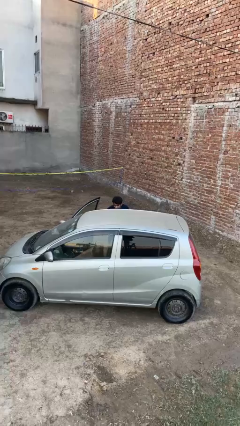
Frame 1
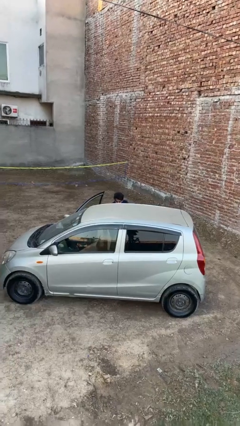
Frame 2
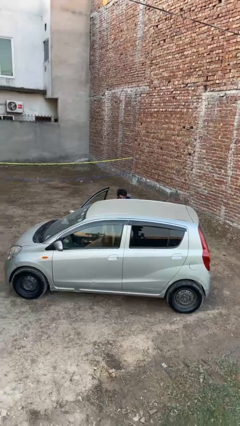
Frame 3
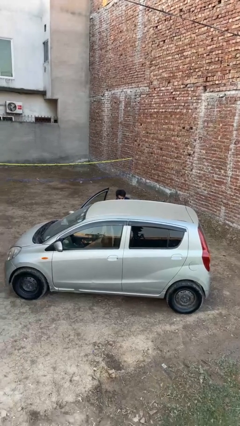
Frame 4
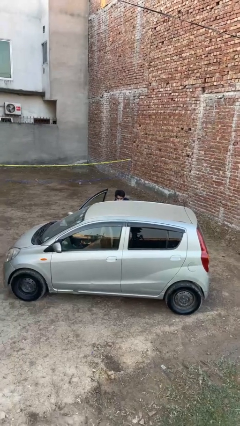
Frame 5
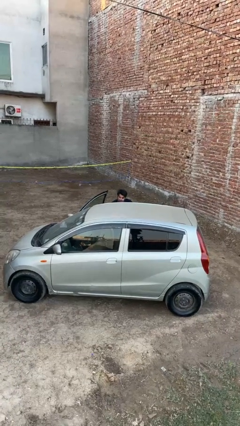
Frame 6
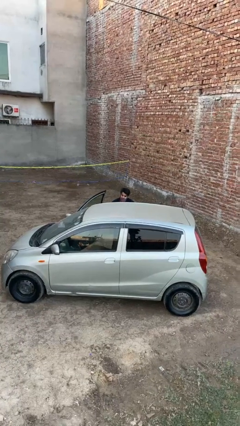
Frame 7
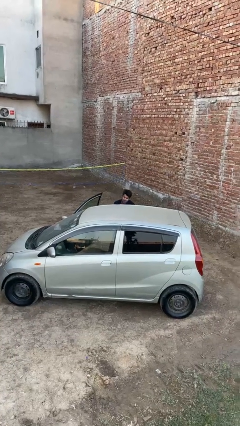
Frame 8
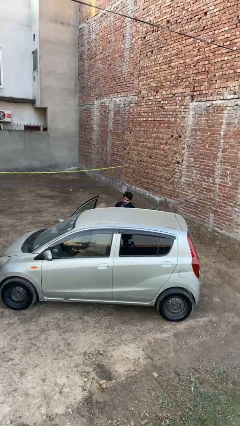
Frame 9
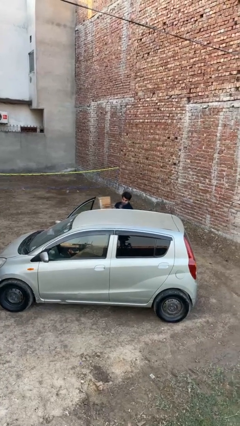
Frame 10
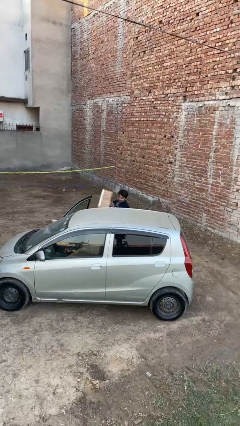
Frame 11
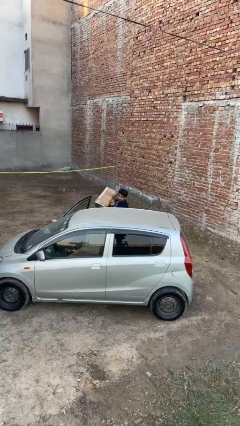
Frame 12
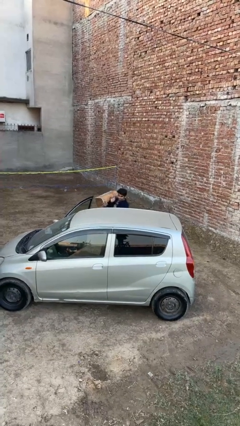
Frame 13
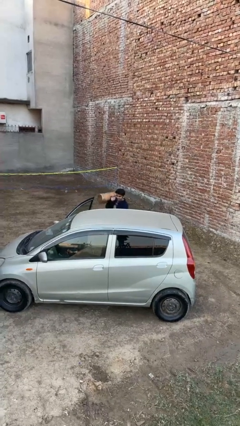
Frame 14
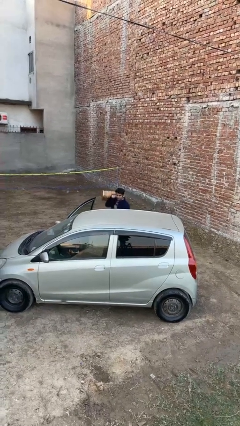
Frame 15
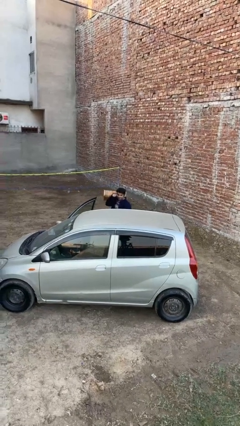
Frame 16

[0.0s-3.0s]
person unloads car

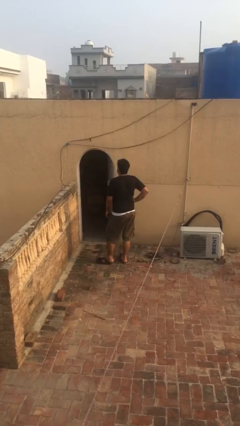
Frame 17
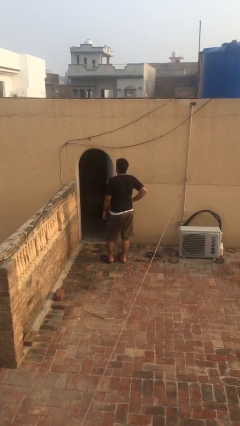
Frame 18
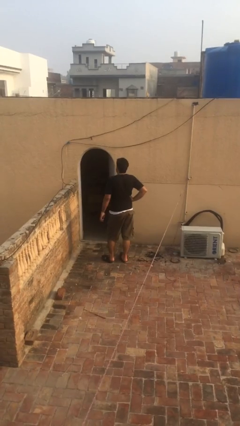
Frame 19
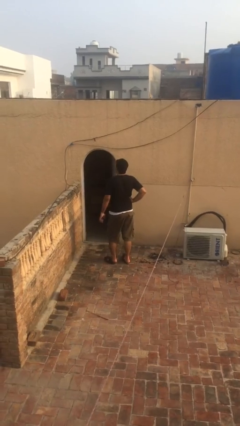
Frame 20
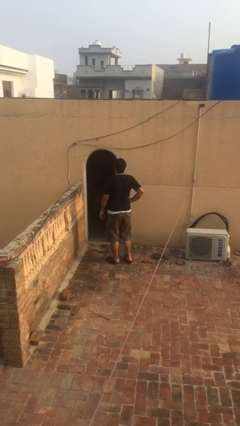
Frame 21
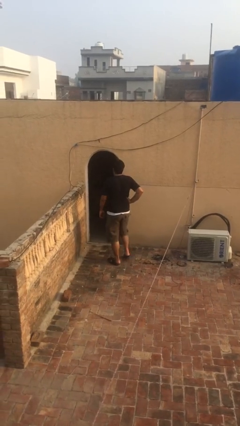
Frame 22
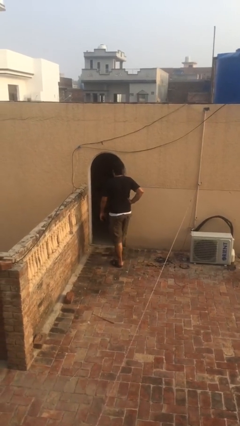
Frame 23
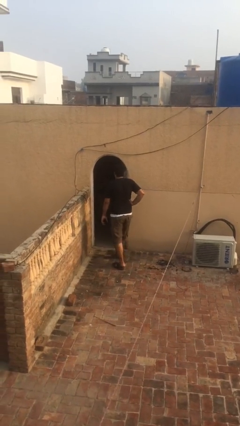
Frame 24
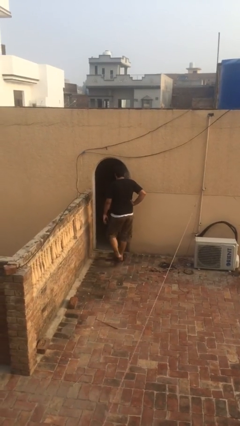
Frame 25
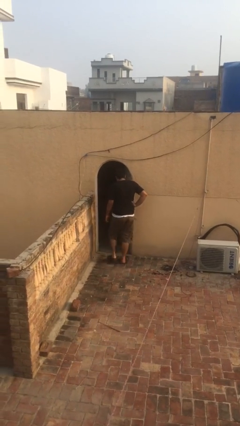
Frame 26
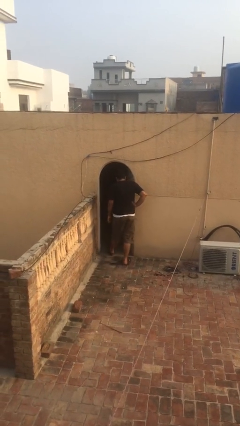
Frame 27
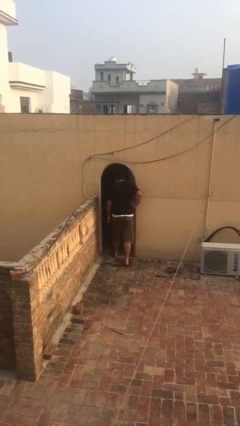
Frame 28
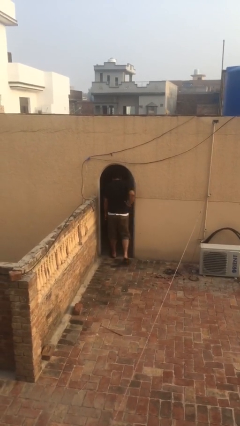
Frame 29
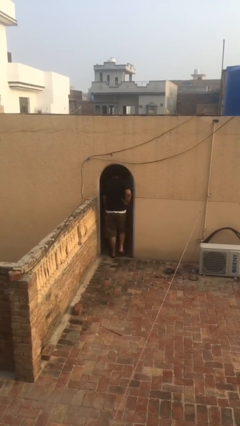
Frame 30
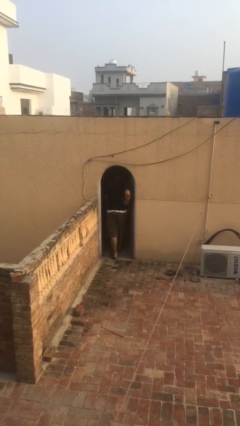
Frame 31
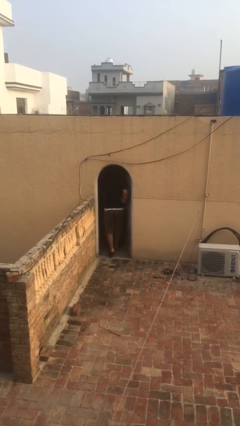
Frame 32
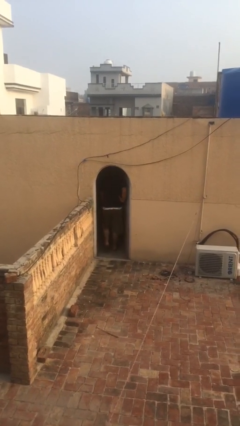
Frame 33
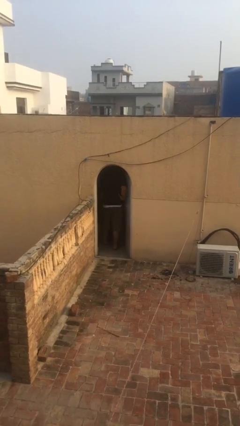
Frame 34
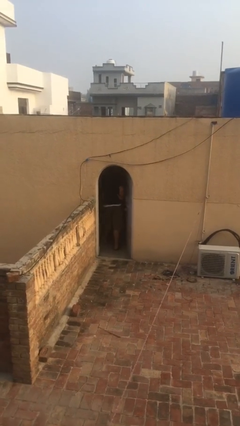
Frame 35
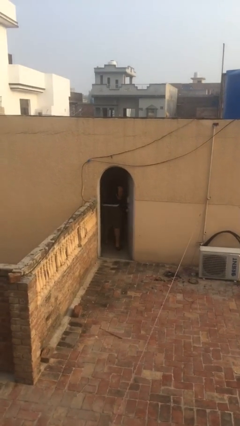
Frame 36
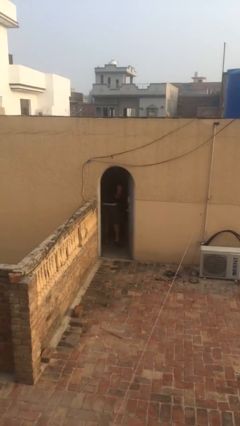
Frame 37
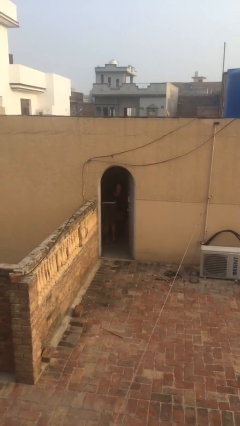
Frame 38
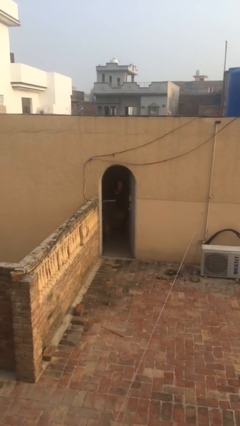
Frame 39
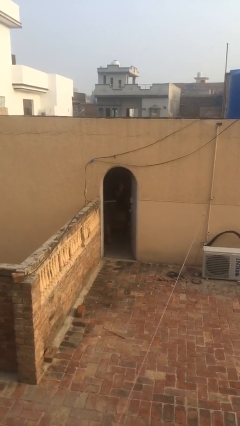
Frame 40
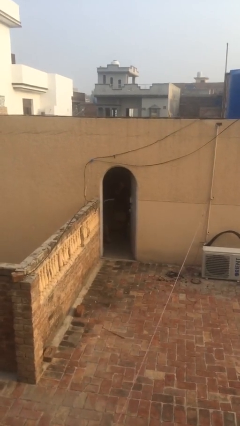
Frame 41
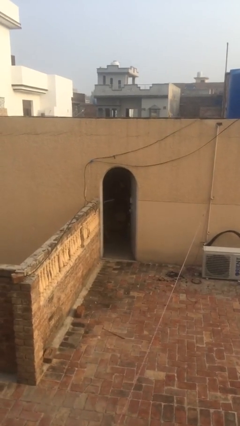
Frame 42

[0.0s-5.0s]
person exits scene through structure

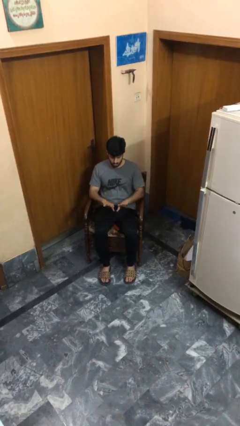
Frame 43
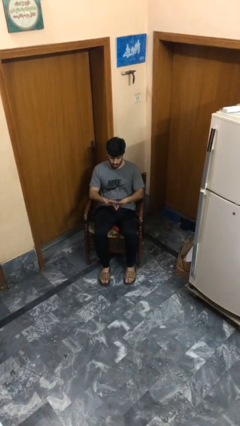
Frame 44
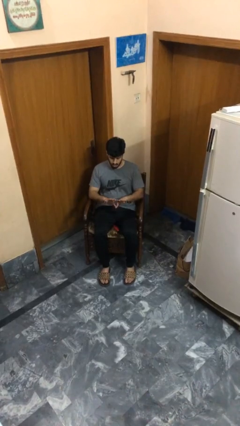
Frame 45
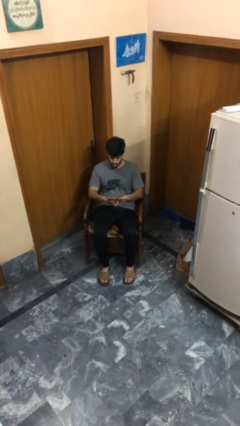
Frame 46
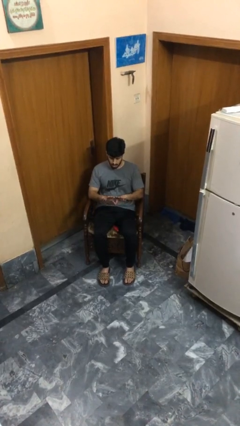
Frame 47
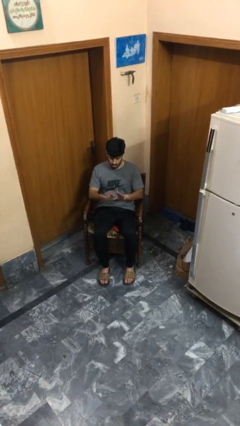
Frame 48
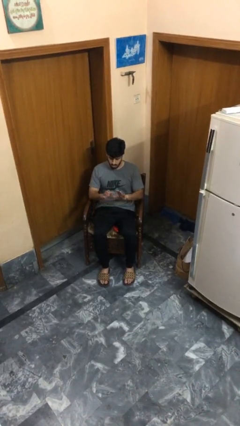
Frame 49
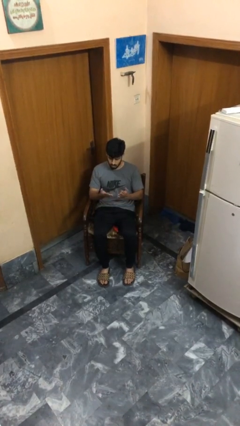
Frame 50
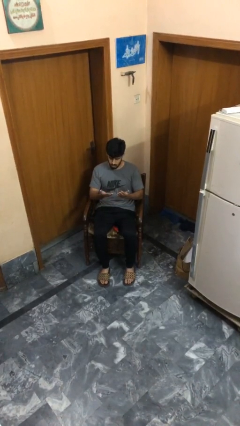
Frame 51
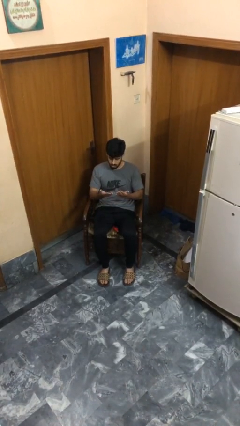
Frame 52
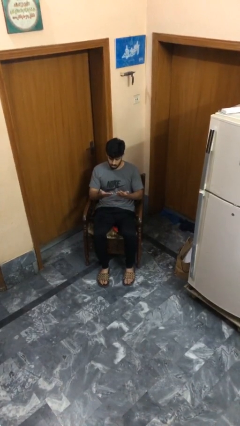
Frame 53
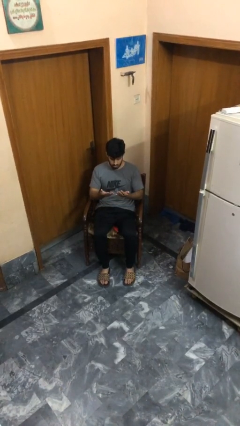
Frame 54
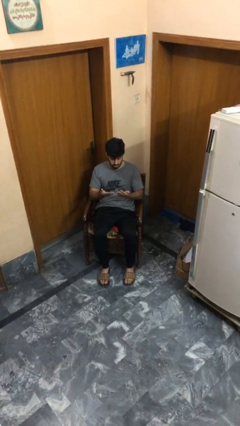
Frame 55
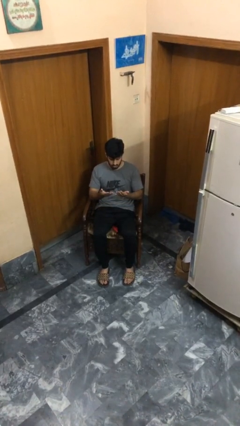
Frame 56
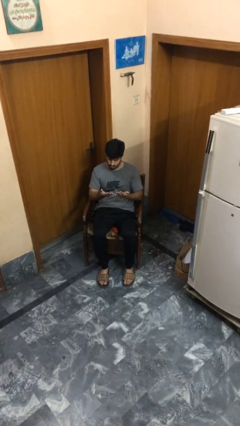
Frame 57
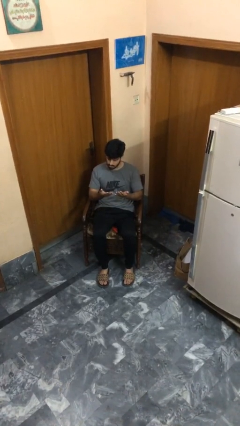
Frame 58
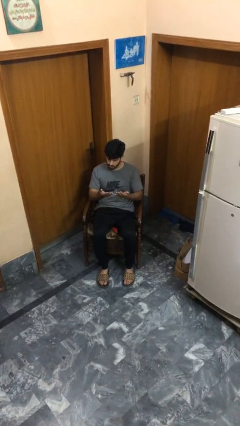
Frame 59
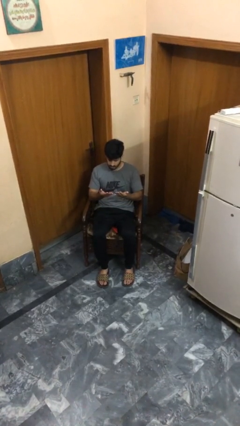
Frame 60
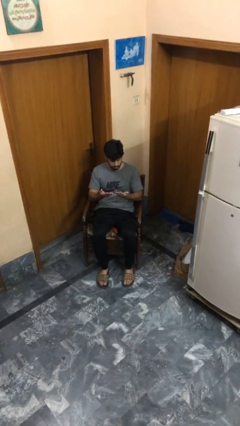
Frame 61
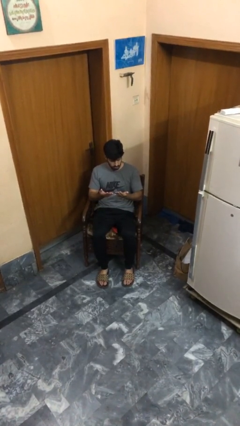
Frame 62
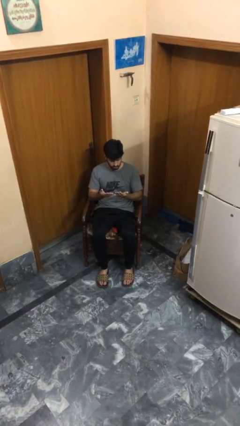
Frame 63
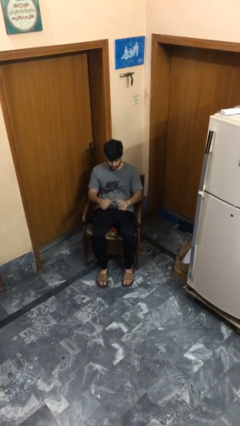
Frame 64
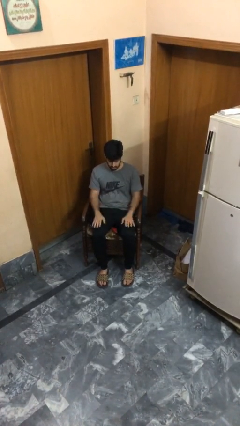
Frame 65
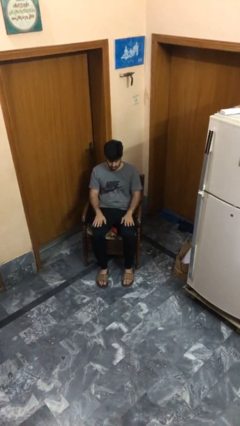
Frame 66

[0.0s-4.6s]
person looks at hands in lap

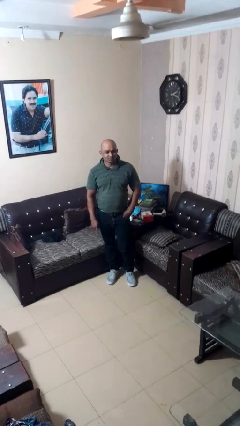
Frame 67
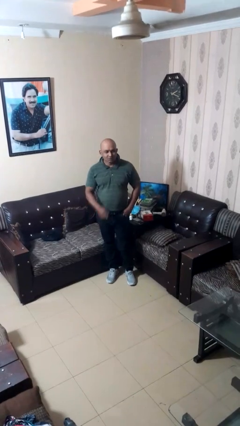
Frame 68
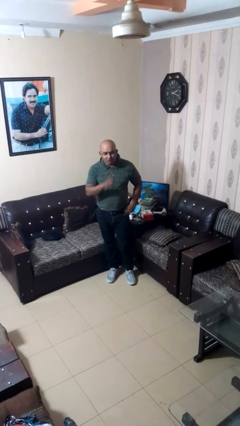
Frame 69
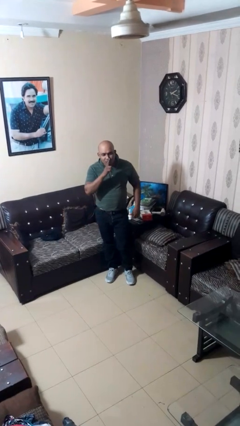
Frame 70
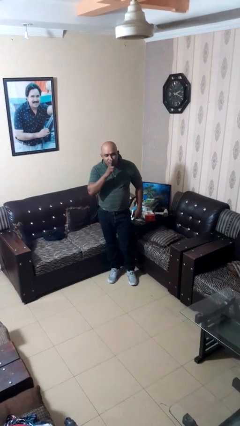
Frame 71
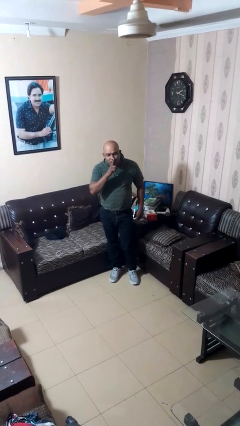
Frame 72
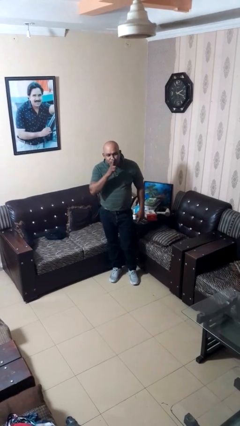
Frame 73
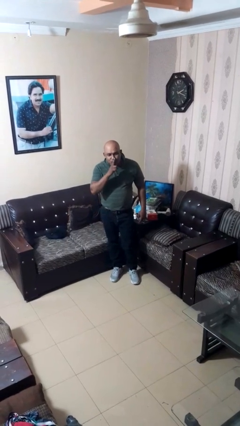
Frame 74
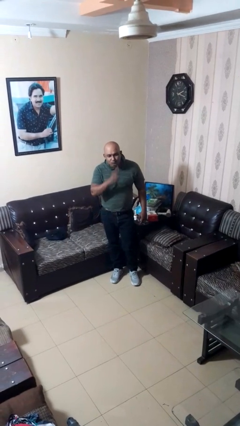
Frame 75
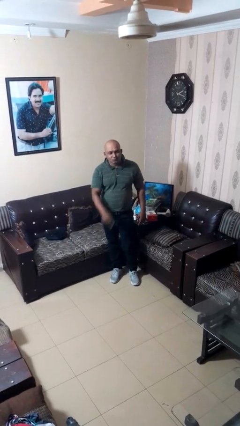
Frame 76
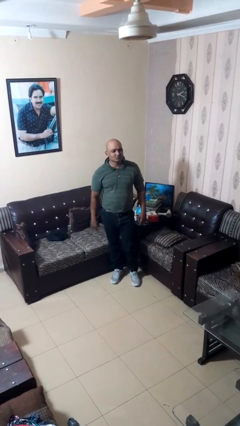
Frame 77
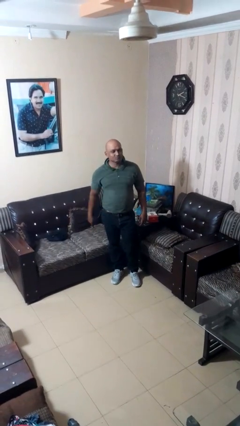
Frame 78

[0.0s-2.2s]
person gestures be quiet

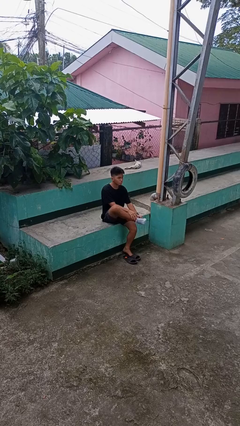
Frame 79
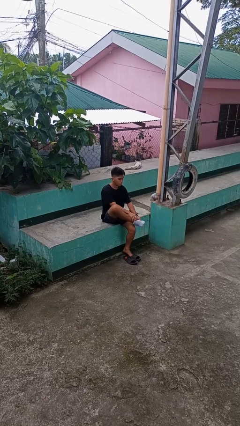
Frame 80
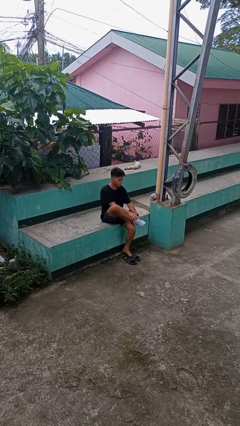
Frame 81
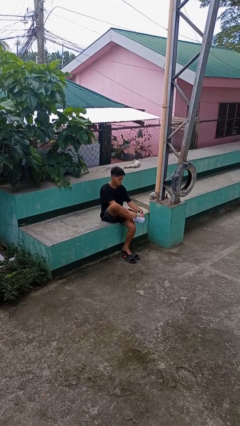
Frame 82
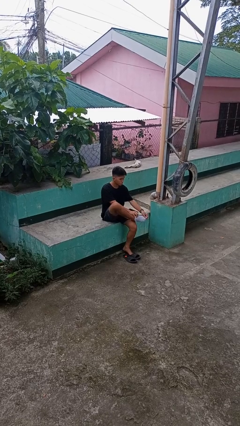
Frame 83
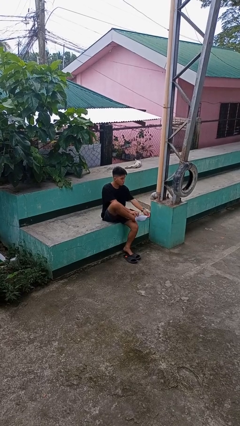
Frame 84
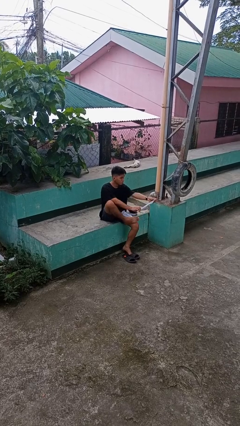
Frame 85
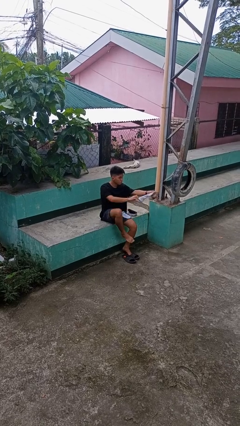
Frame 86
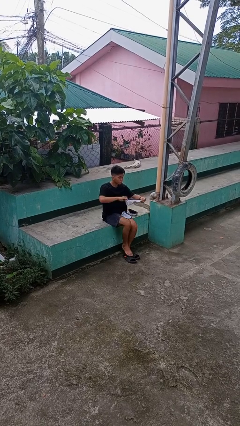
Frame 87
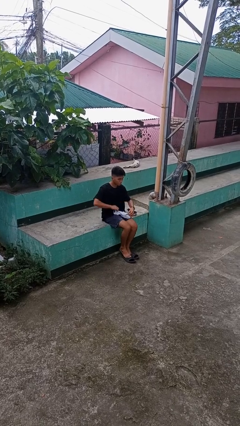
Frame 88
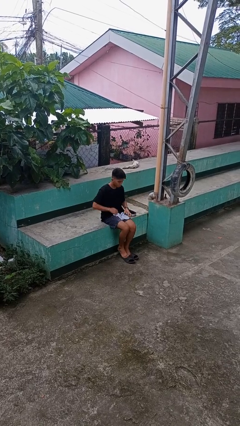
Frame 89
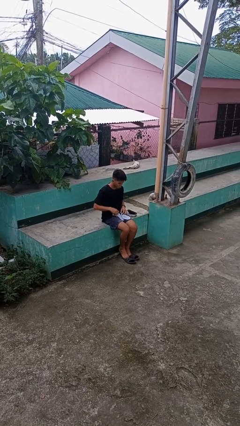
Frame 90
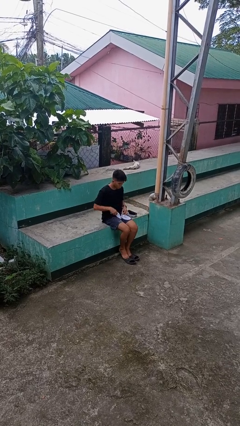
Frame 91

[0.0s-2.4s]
person takes off socks

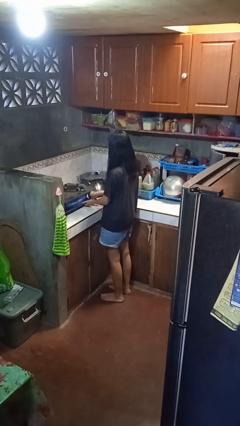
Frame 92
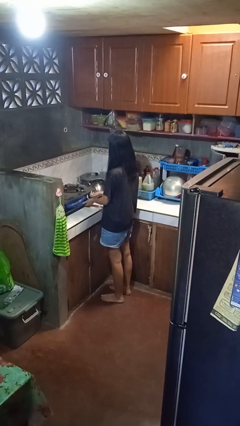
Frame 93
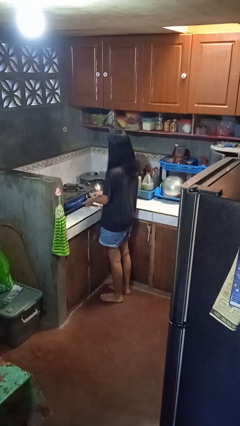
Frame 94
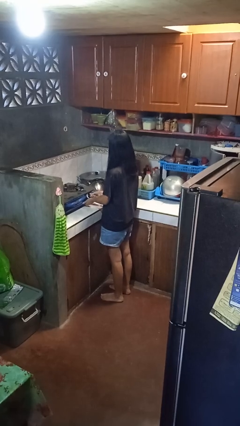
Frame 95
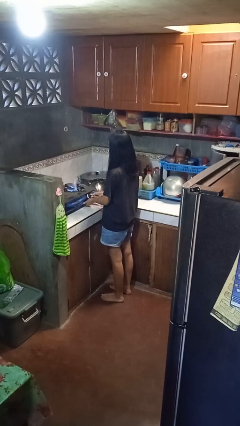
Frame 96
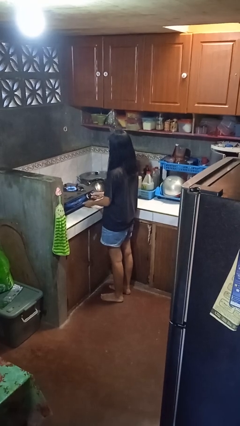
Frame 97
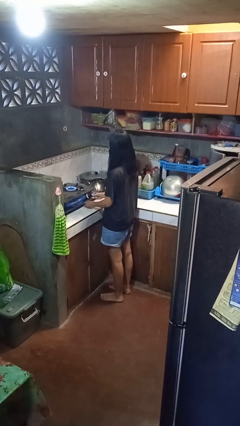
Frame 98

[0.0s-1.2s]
person turns on stovetop
